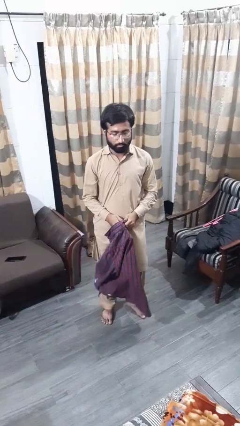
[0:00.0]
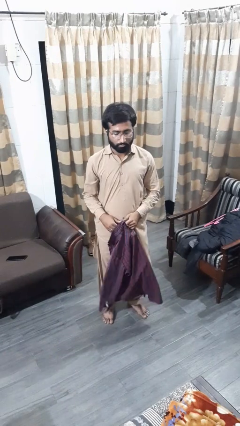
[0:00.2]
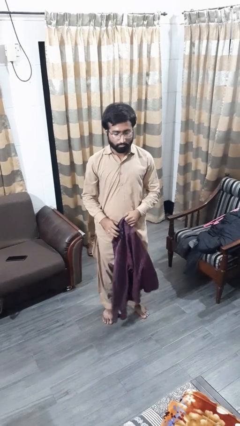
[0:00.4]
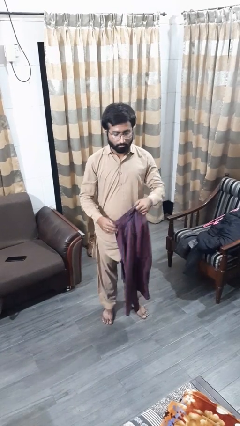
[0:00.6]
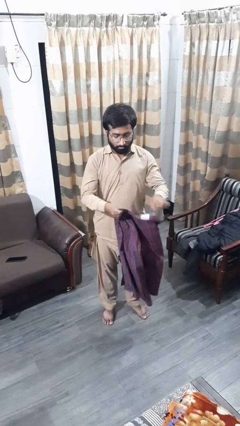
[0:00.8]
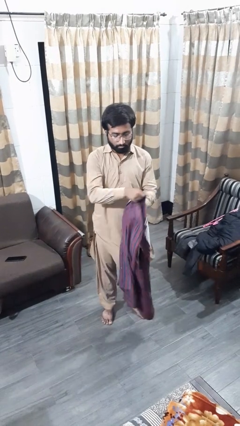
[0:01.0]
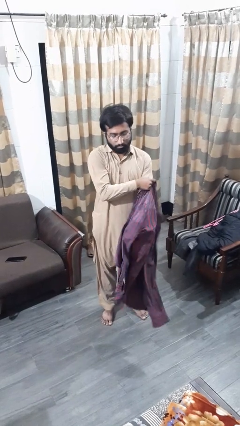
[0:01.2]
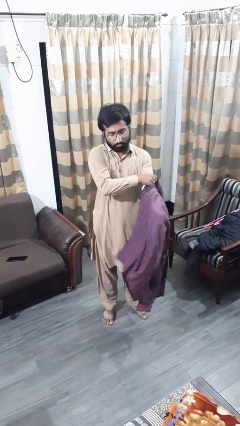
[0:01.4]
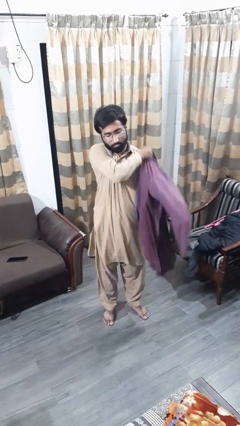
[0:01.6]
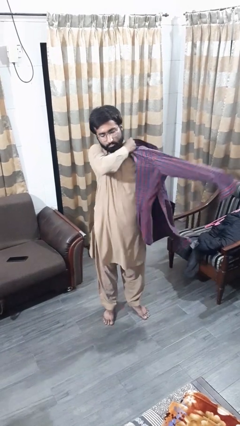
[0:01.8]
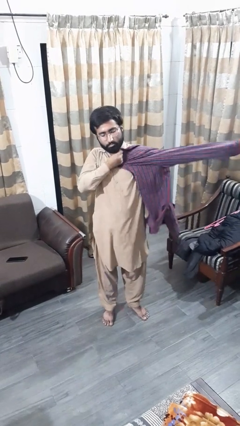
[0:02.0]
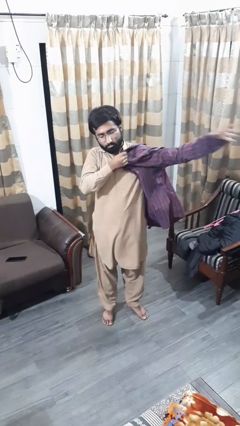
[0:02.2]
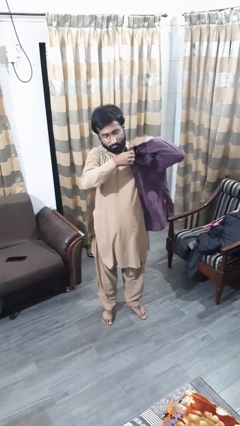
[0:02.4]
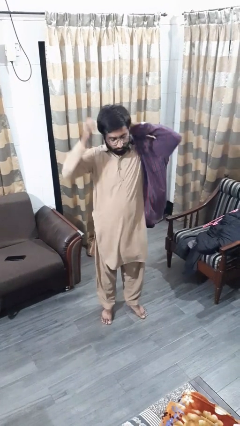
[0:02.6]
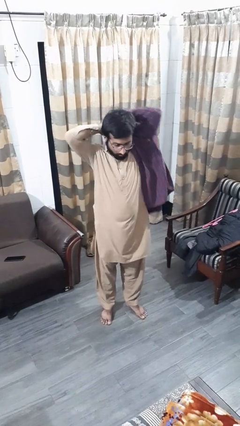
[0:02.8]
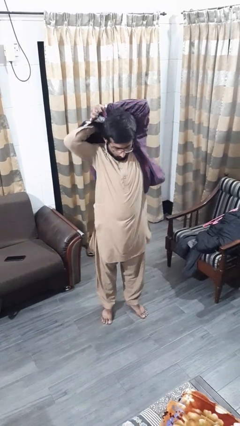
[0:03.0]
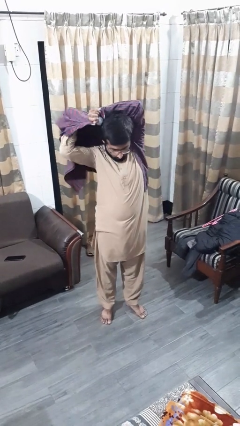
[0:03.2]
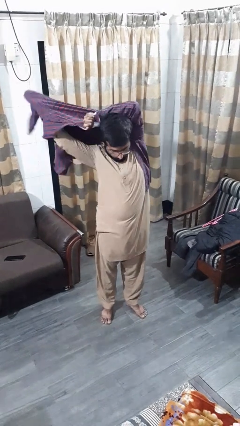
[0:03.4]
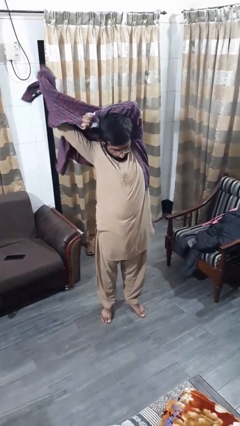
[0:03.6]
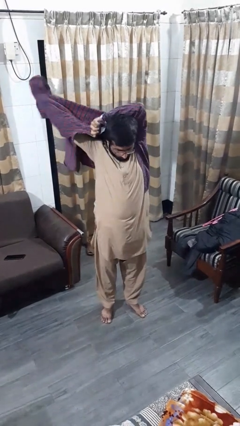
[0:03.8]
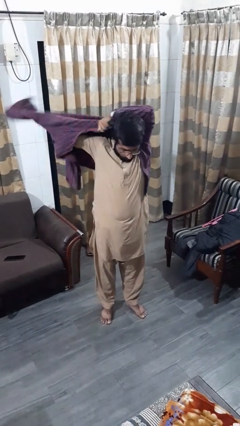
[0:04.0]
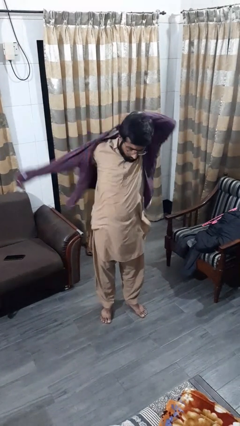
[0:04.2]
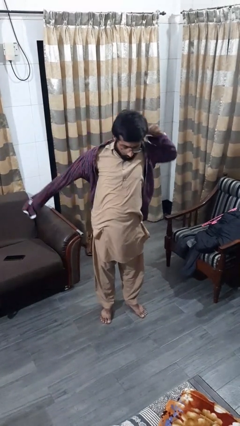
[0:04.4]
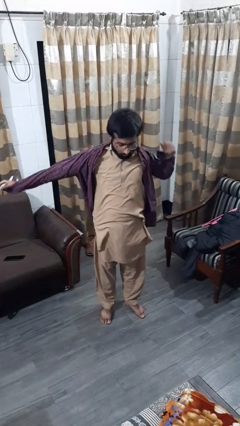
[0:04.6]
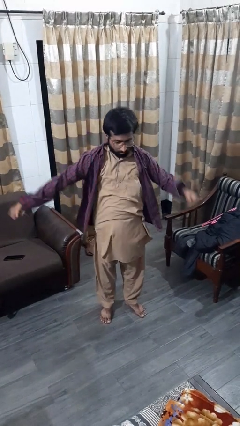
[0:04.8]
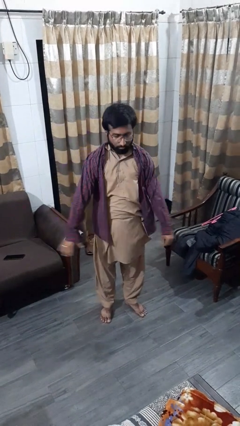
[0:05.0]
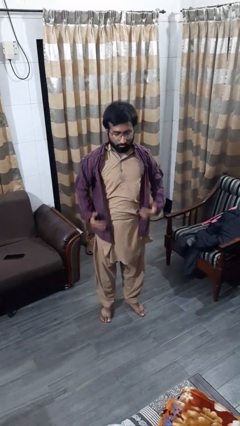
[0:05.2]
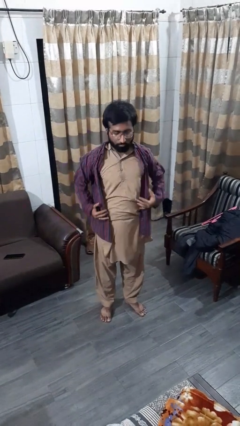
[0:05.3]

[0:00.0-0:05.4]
person puts on shirt

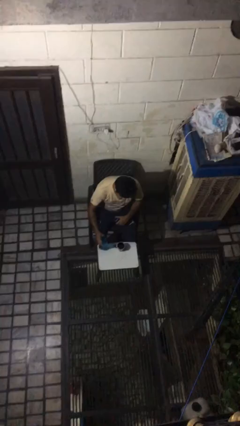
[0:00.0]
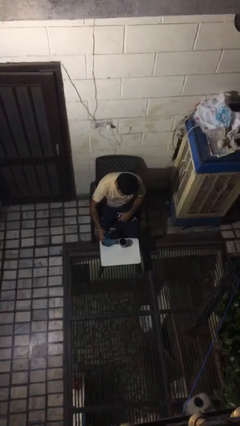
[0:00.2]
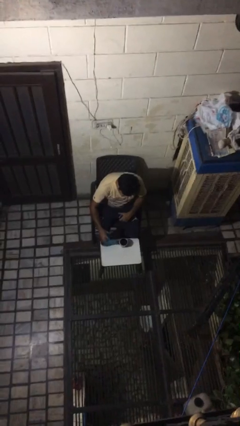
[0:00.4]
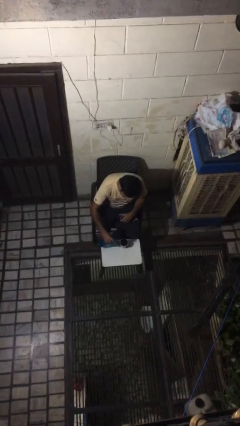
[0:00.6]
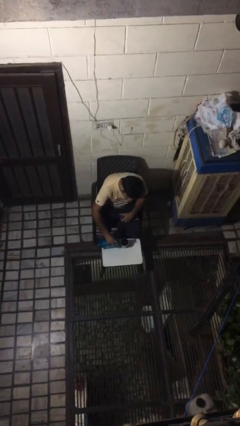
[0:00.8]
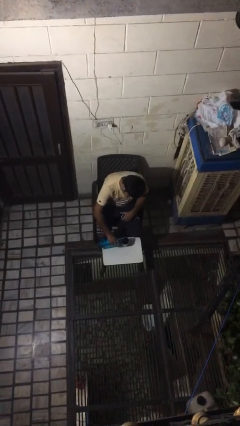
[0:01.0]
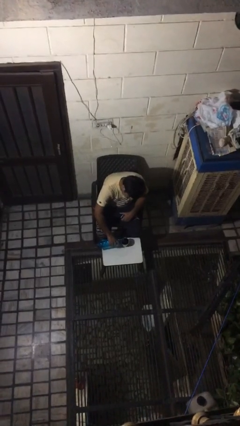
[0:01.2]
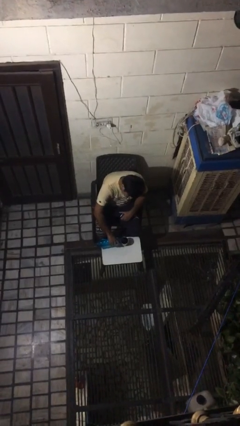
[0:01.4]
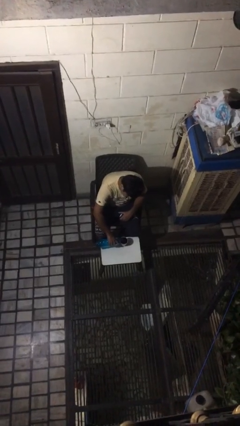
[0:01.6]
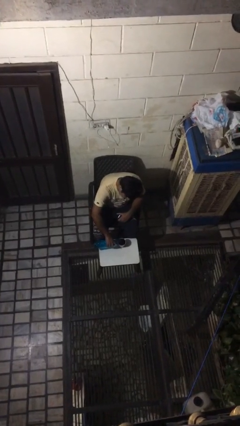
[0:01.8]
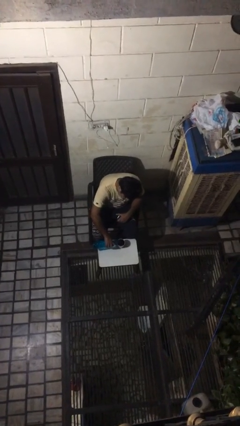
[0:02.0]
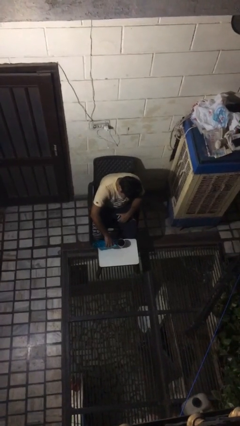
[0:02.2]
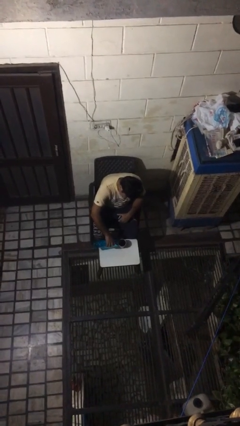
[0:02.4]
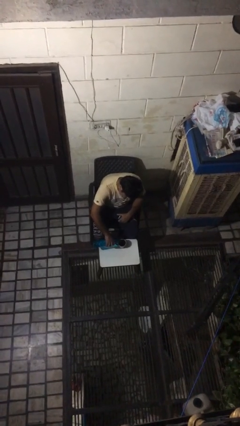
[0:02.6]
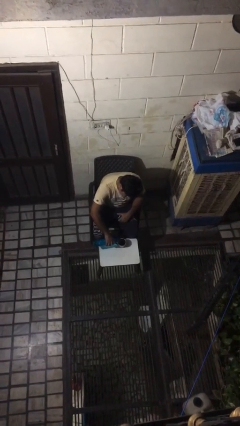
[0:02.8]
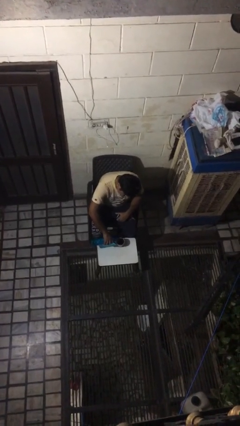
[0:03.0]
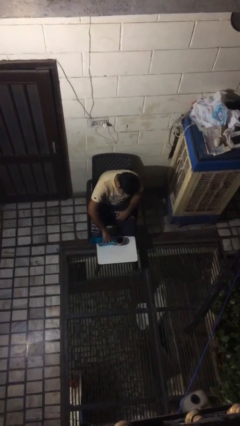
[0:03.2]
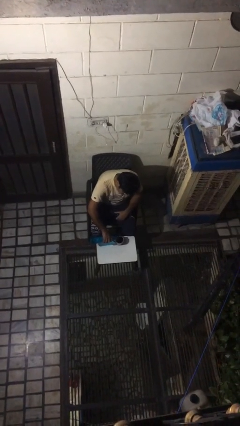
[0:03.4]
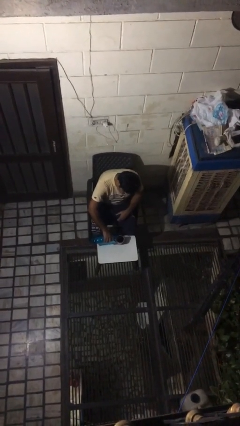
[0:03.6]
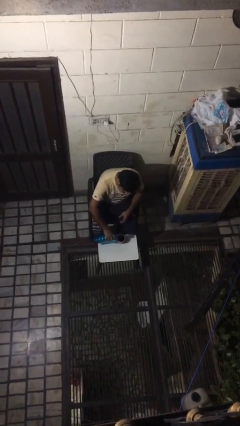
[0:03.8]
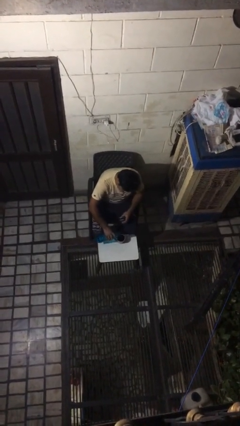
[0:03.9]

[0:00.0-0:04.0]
person pours liquid into cup

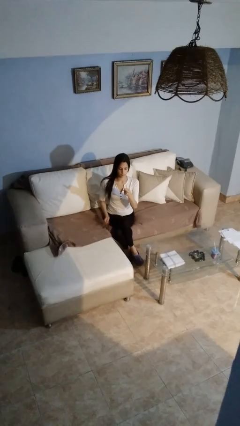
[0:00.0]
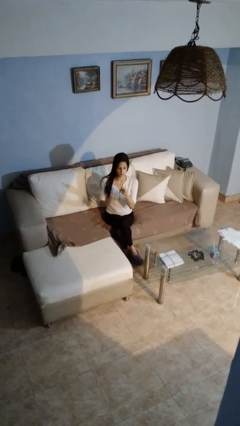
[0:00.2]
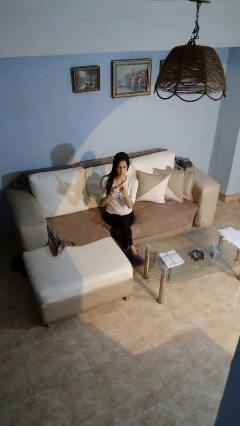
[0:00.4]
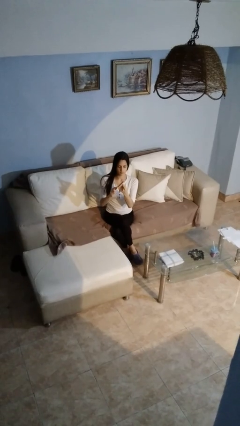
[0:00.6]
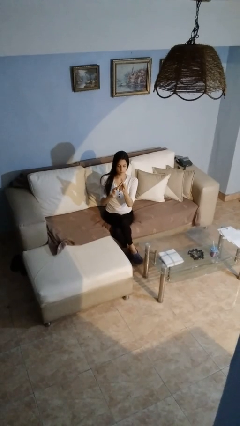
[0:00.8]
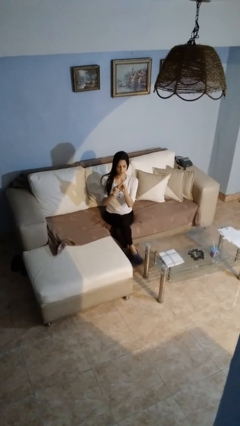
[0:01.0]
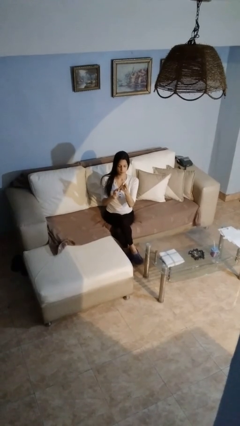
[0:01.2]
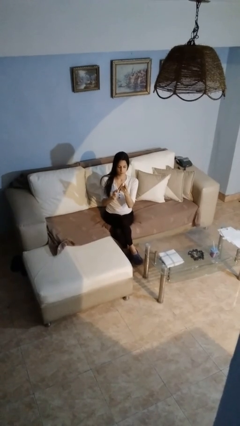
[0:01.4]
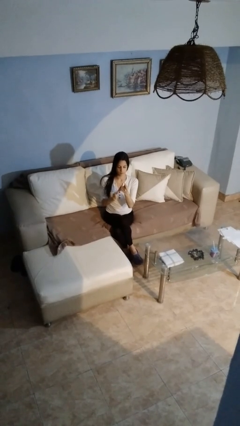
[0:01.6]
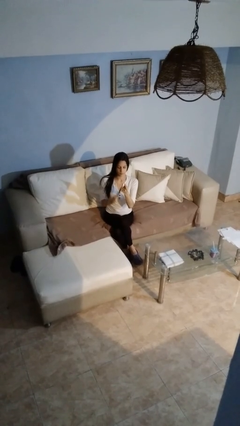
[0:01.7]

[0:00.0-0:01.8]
person files fingernails

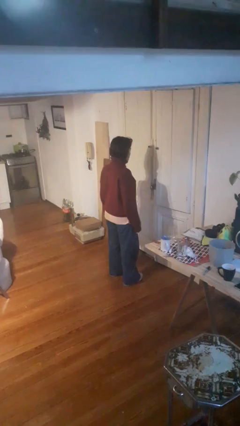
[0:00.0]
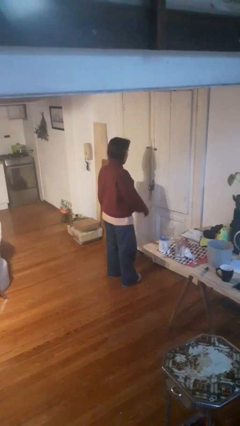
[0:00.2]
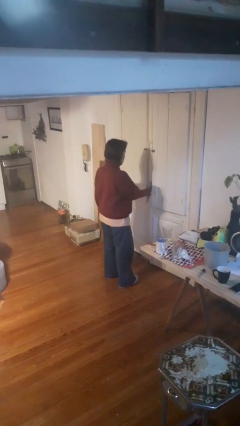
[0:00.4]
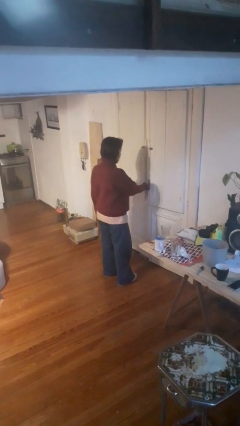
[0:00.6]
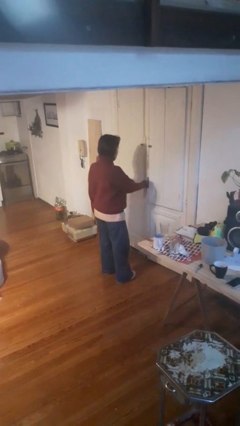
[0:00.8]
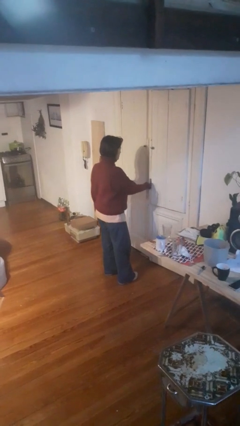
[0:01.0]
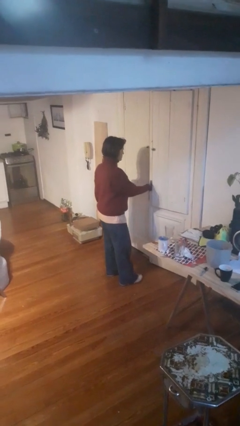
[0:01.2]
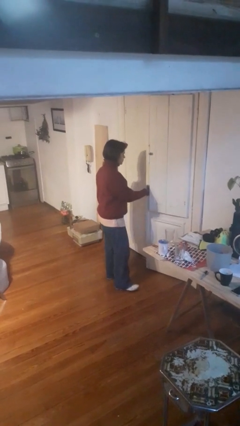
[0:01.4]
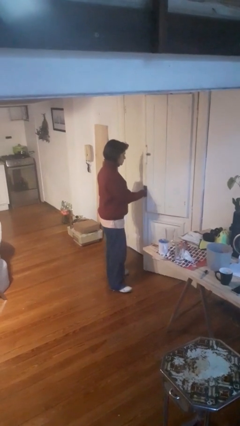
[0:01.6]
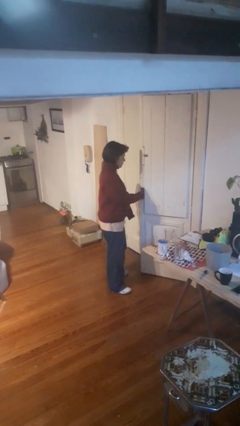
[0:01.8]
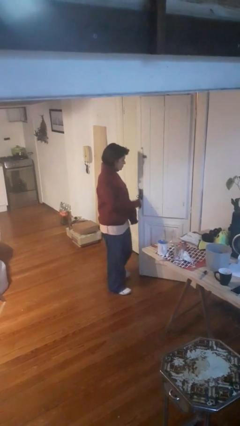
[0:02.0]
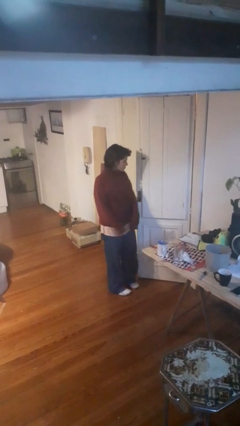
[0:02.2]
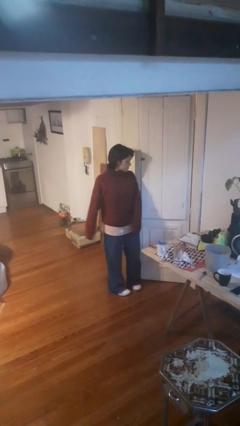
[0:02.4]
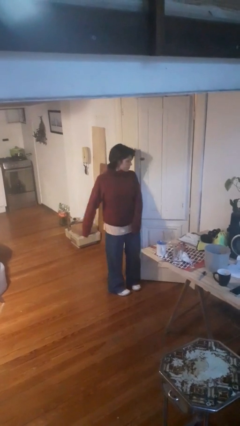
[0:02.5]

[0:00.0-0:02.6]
person opens facility door

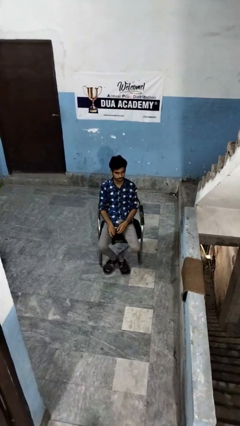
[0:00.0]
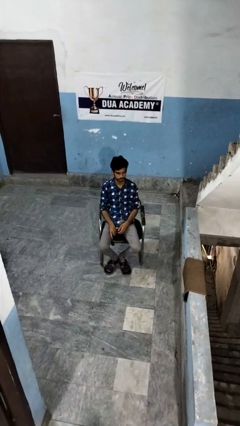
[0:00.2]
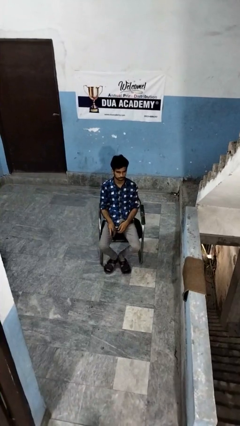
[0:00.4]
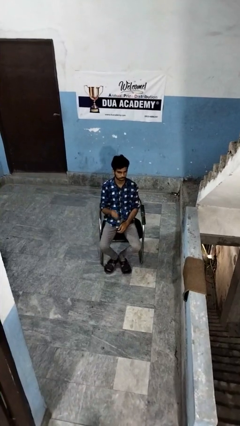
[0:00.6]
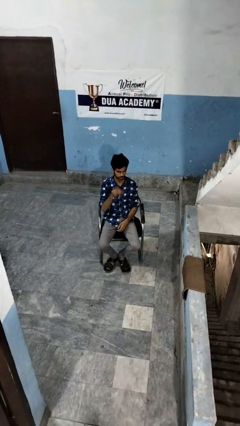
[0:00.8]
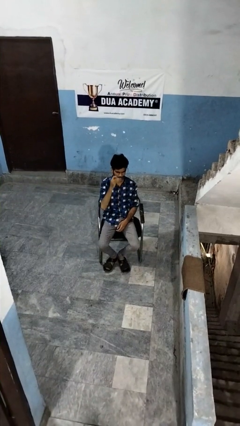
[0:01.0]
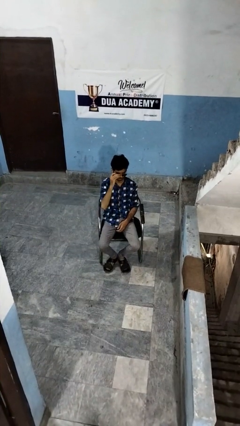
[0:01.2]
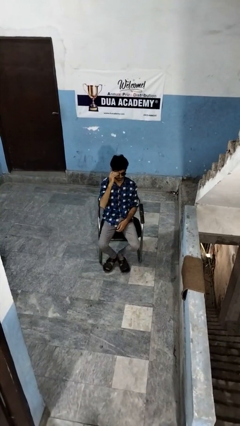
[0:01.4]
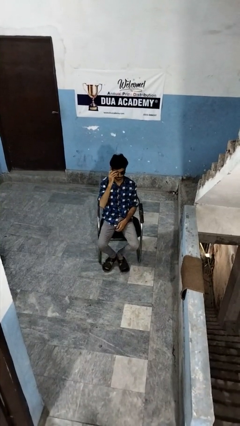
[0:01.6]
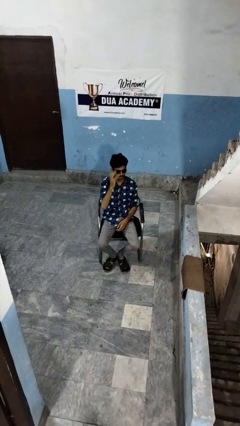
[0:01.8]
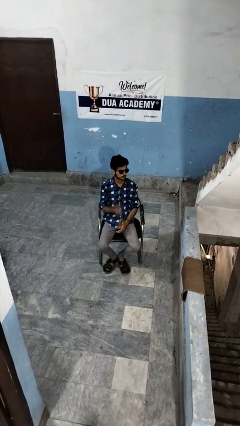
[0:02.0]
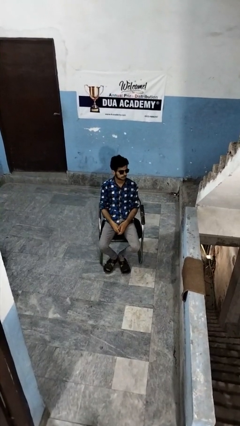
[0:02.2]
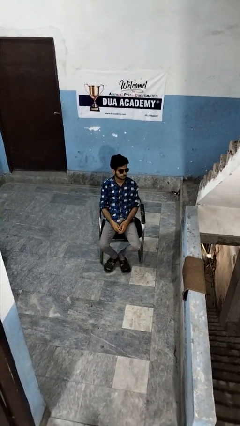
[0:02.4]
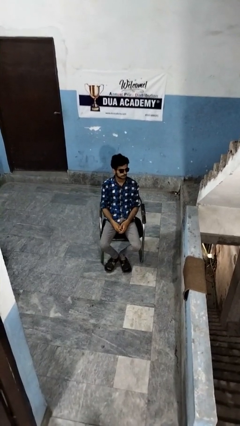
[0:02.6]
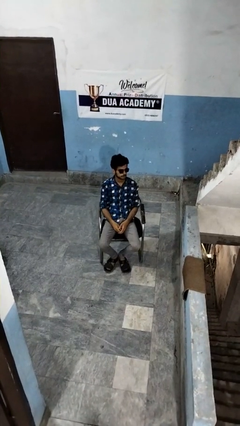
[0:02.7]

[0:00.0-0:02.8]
person puts on sunglasses

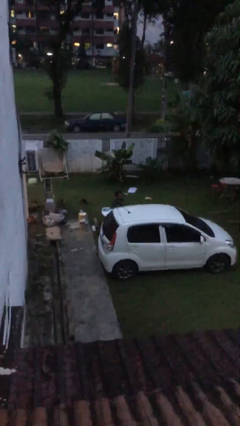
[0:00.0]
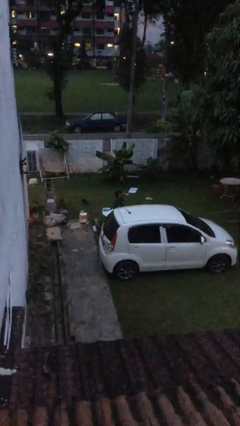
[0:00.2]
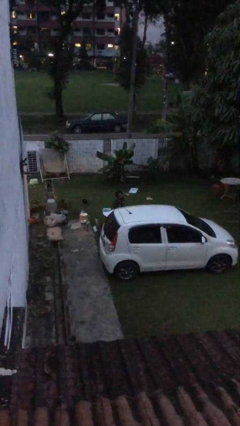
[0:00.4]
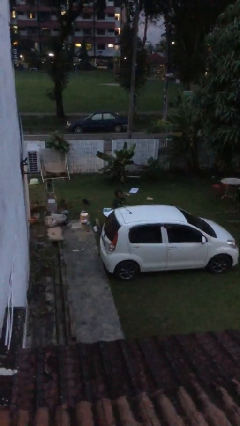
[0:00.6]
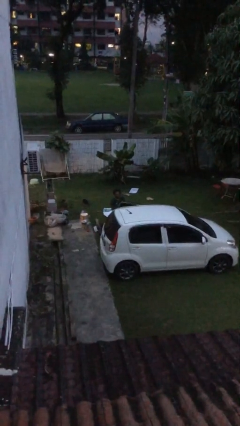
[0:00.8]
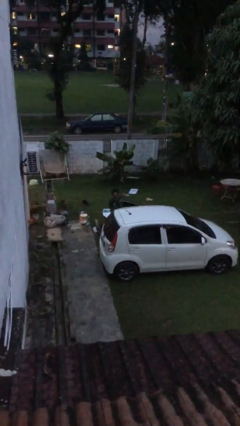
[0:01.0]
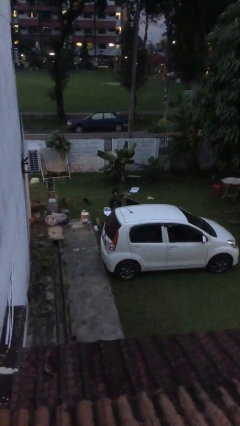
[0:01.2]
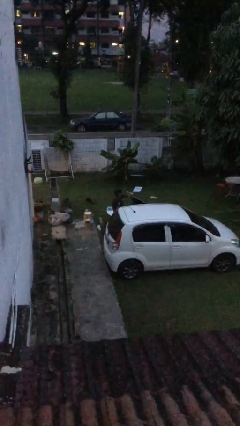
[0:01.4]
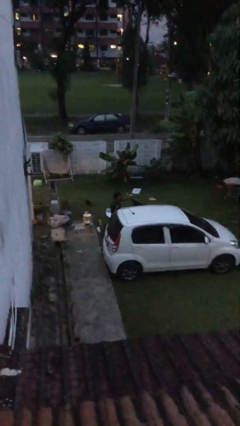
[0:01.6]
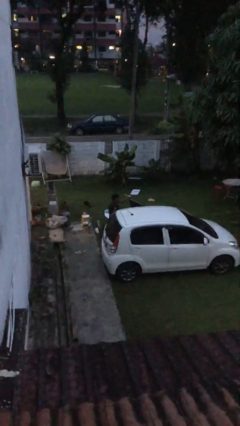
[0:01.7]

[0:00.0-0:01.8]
person opens car door
